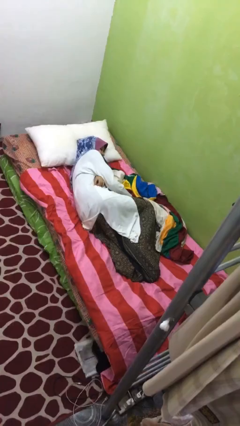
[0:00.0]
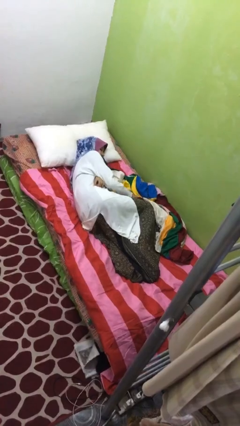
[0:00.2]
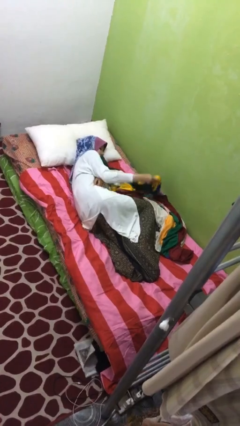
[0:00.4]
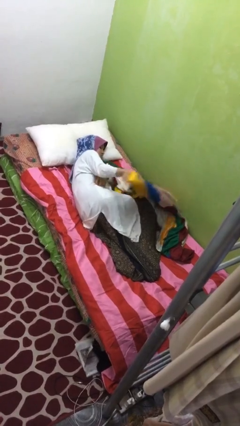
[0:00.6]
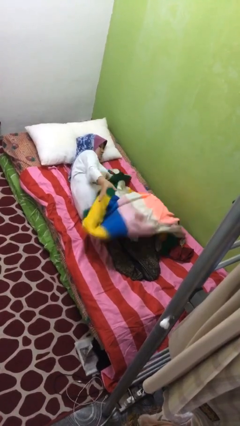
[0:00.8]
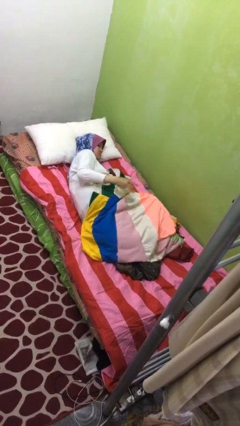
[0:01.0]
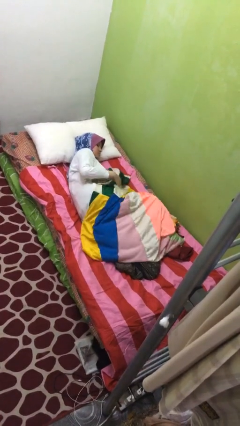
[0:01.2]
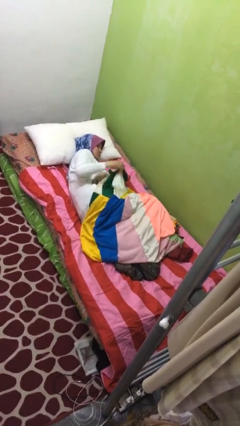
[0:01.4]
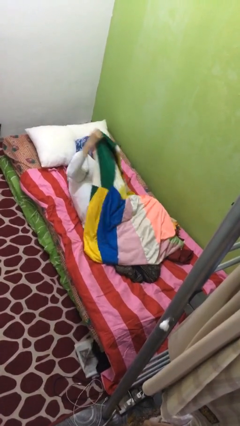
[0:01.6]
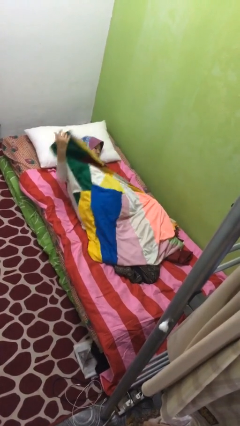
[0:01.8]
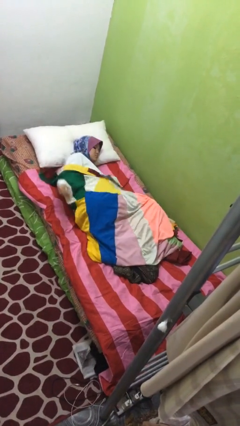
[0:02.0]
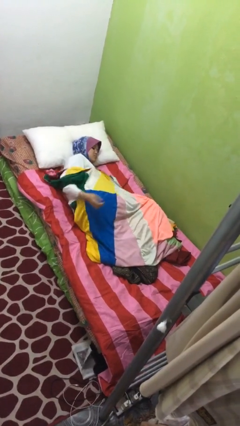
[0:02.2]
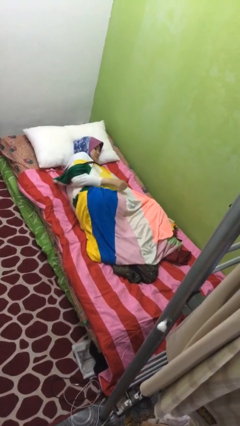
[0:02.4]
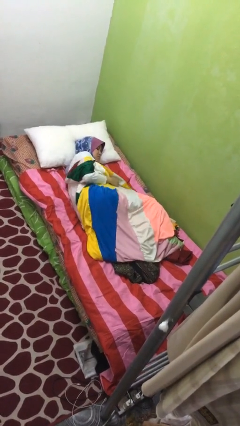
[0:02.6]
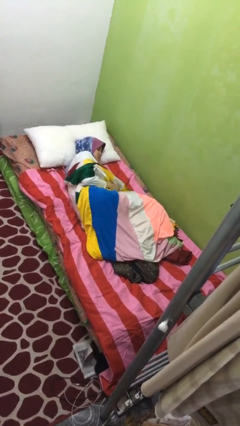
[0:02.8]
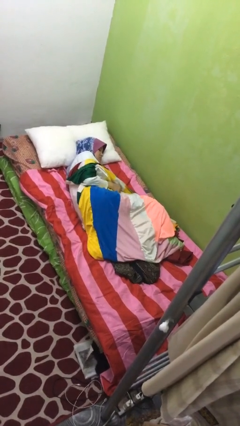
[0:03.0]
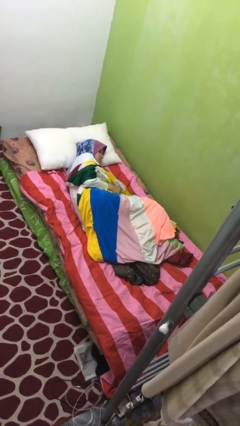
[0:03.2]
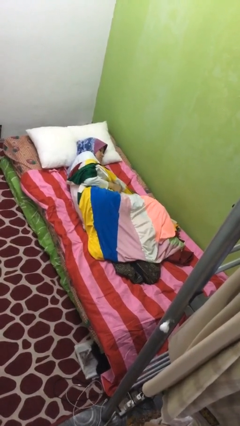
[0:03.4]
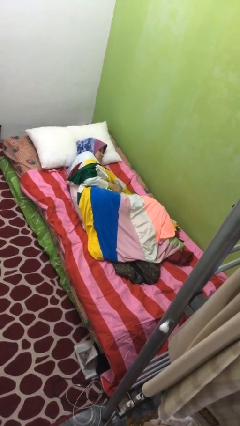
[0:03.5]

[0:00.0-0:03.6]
person covers with blanket

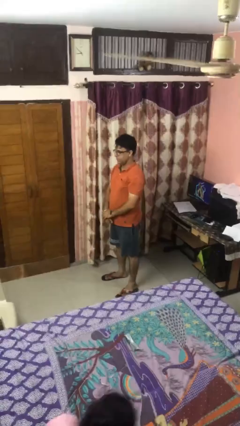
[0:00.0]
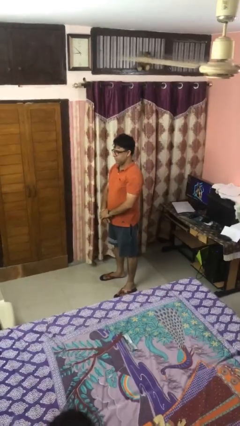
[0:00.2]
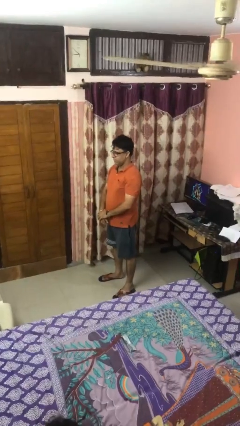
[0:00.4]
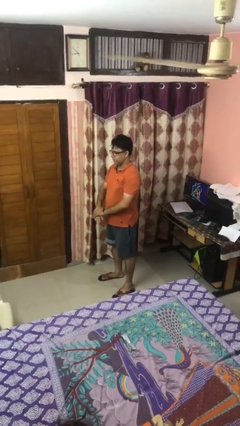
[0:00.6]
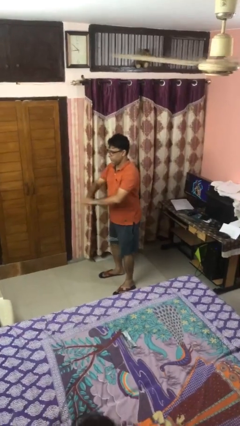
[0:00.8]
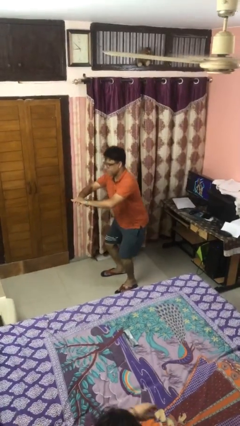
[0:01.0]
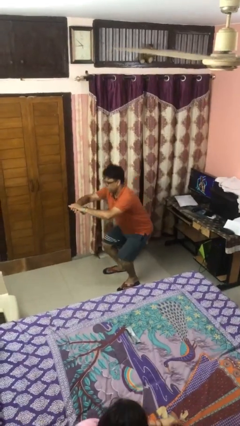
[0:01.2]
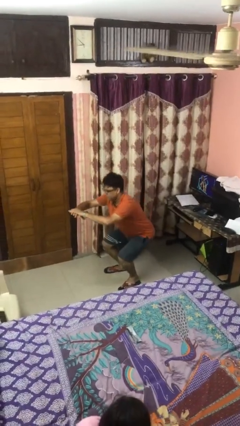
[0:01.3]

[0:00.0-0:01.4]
person squats

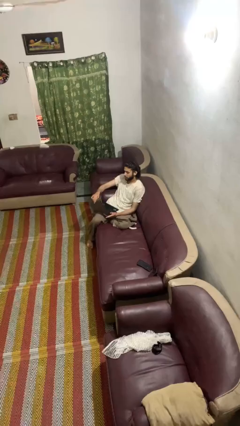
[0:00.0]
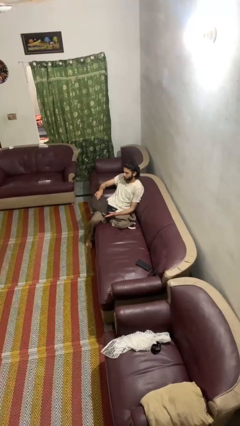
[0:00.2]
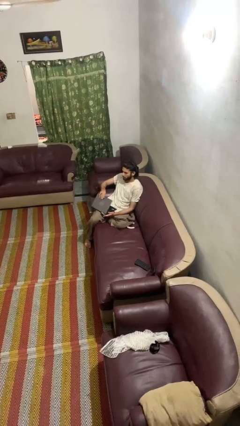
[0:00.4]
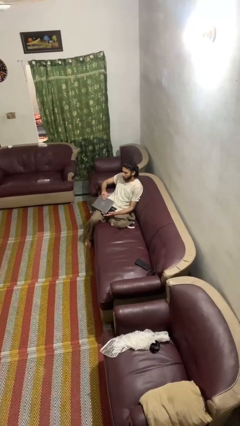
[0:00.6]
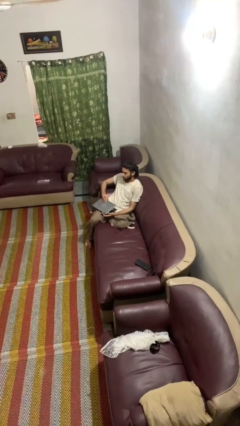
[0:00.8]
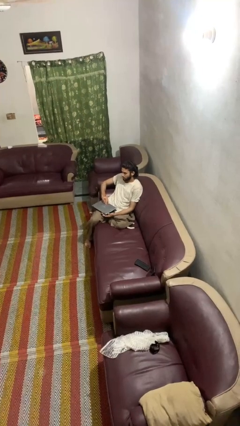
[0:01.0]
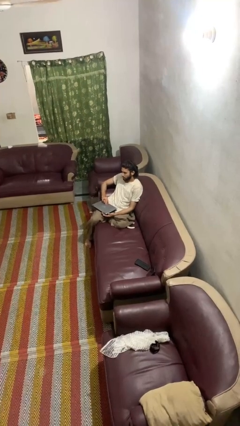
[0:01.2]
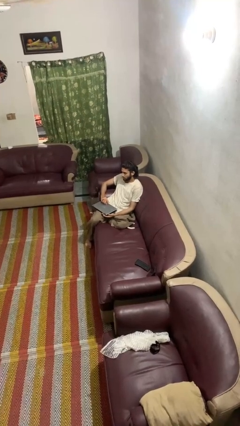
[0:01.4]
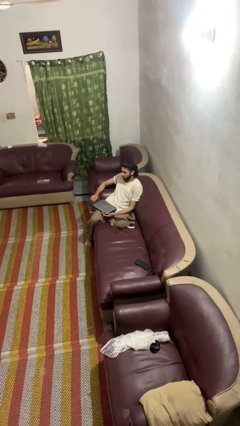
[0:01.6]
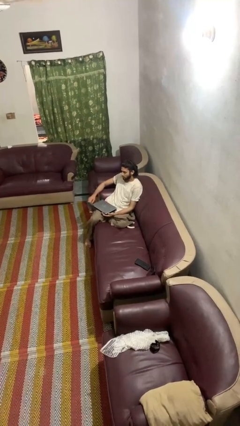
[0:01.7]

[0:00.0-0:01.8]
person closes laptop

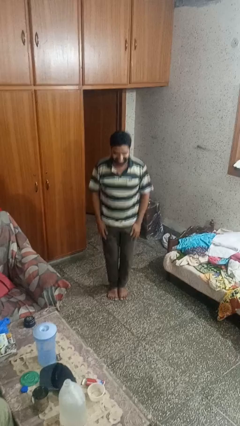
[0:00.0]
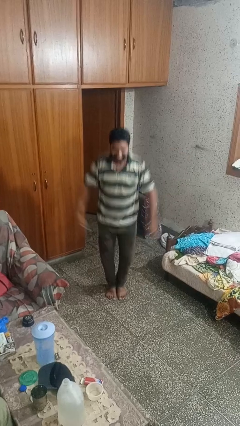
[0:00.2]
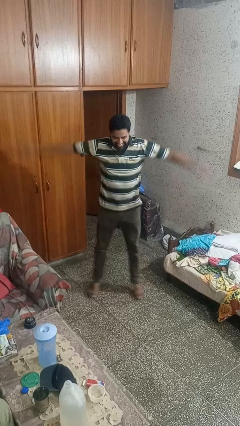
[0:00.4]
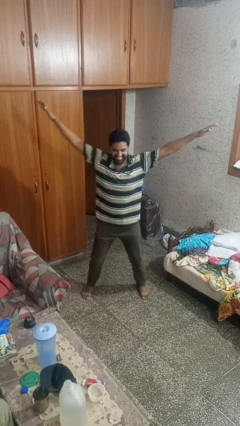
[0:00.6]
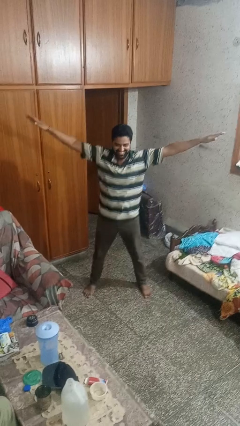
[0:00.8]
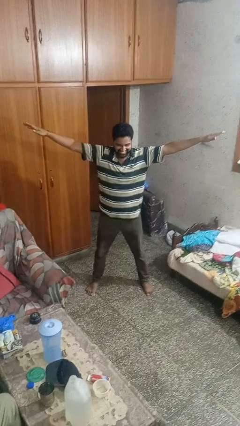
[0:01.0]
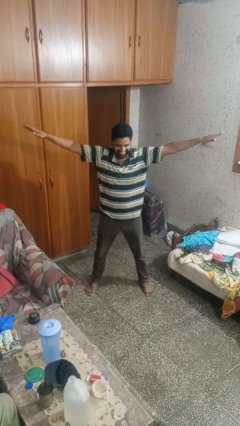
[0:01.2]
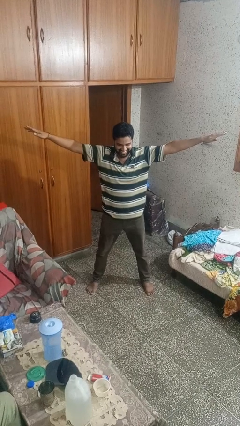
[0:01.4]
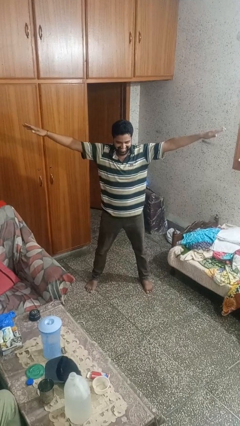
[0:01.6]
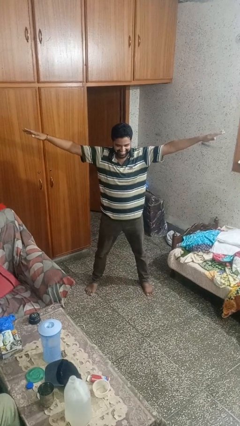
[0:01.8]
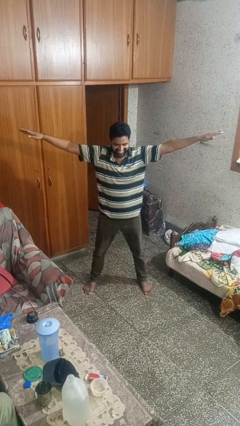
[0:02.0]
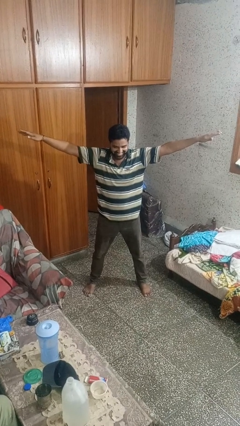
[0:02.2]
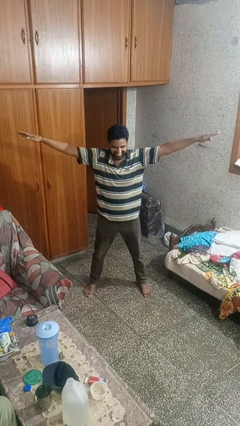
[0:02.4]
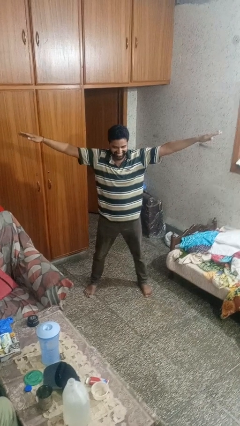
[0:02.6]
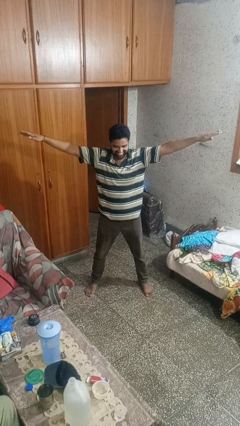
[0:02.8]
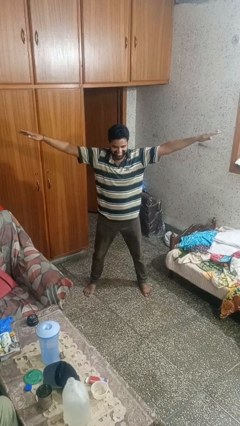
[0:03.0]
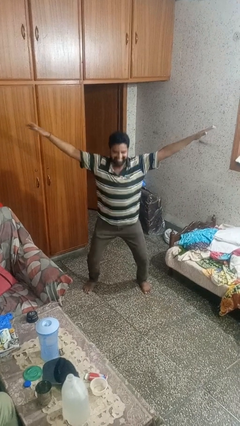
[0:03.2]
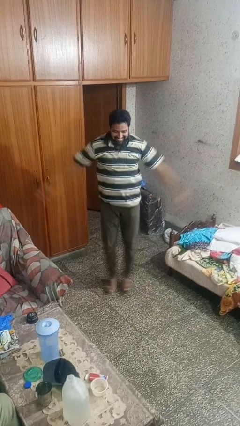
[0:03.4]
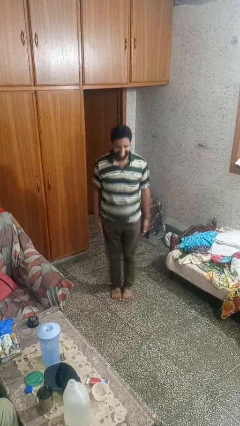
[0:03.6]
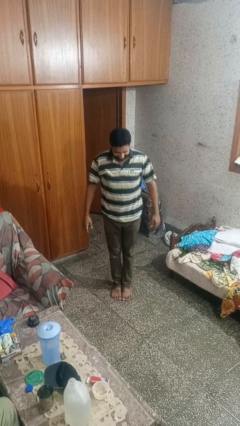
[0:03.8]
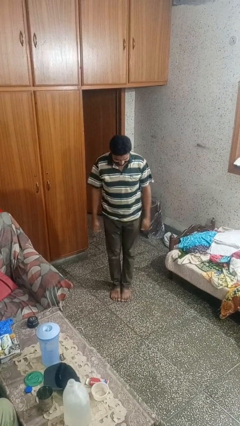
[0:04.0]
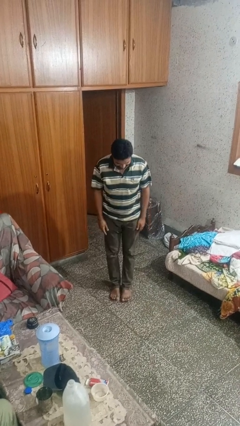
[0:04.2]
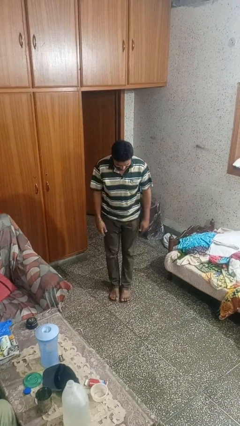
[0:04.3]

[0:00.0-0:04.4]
person exercises with jumping jacks

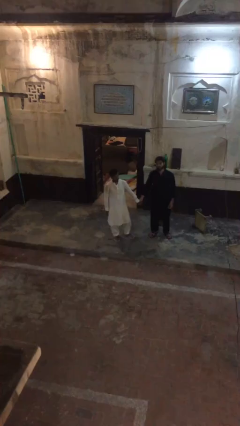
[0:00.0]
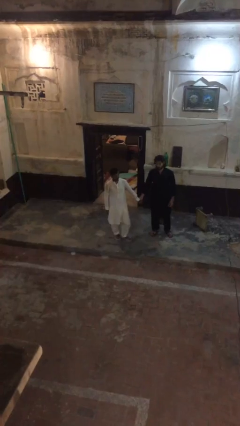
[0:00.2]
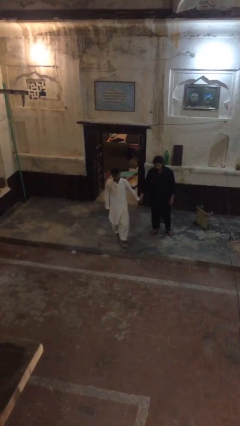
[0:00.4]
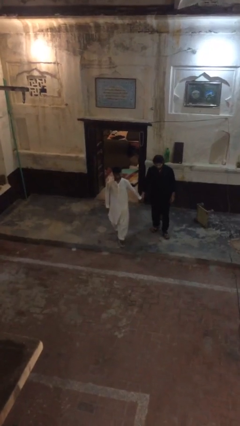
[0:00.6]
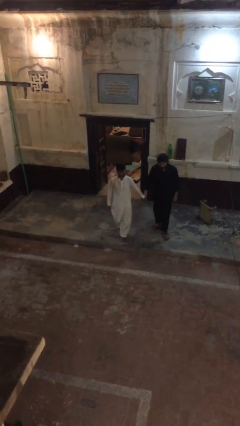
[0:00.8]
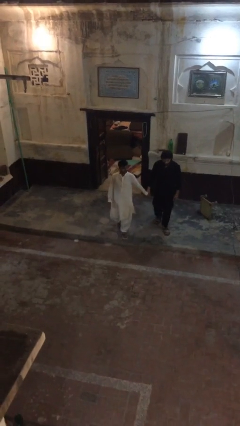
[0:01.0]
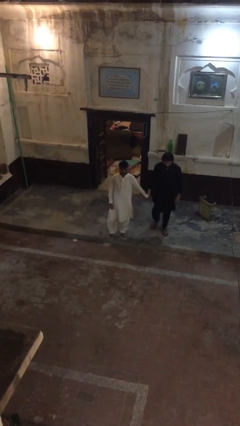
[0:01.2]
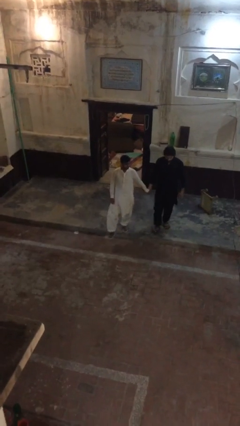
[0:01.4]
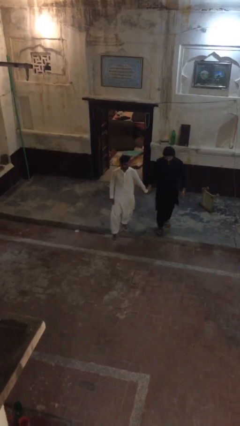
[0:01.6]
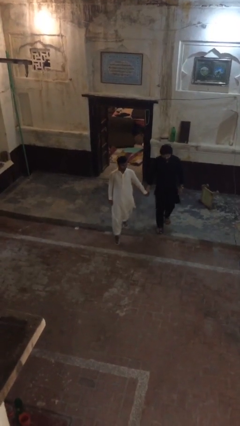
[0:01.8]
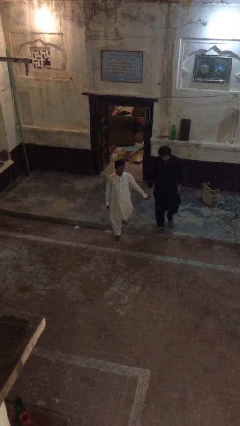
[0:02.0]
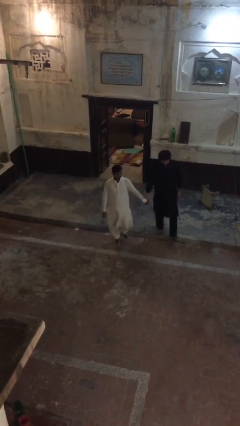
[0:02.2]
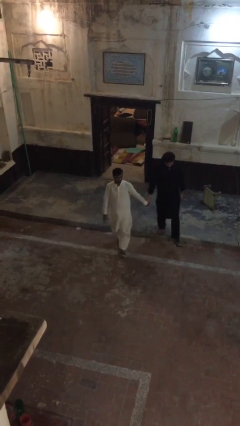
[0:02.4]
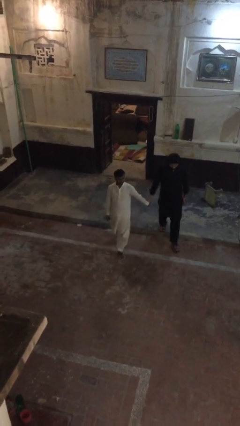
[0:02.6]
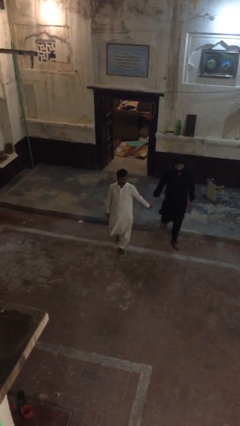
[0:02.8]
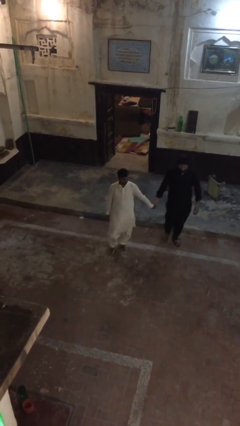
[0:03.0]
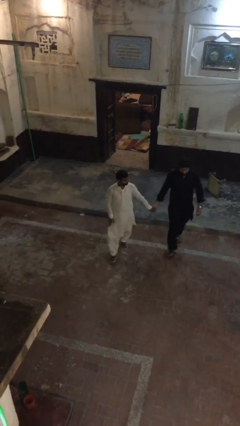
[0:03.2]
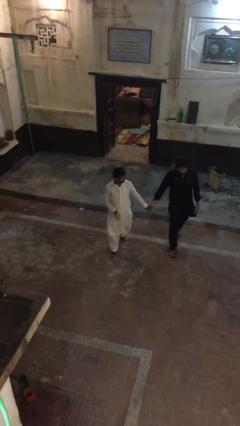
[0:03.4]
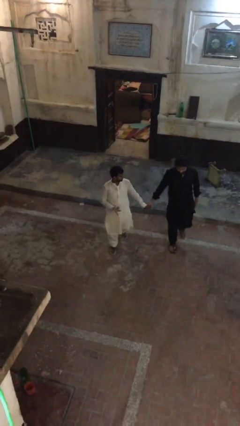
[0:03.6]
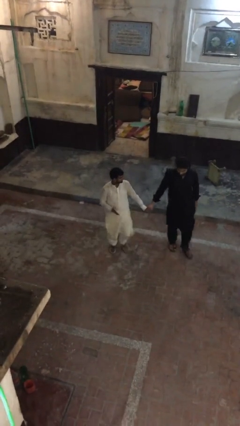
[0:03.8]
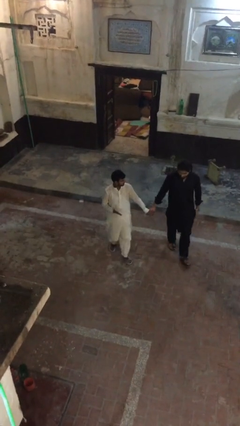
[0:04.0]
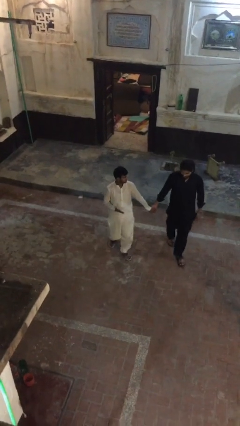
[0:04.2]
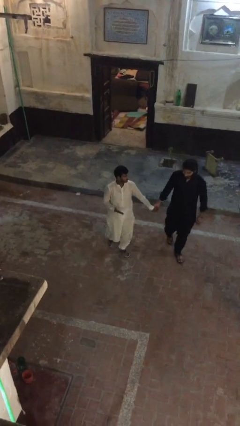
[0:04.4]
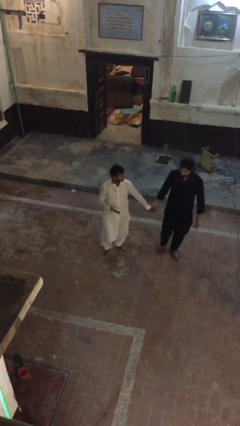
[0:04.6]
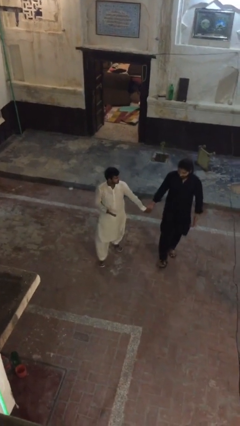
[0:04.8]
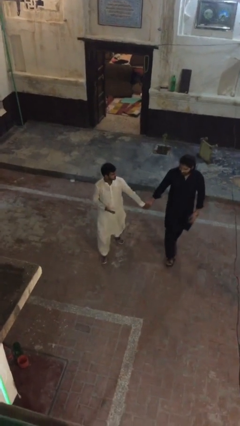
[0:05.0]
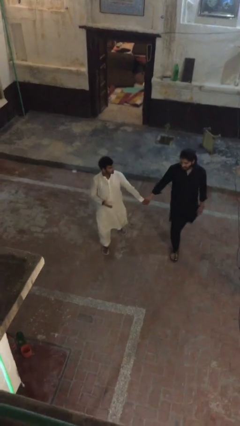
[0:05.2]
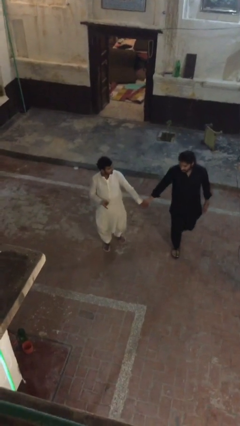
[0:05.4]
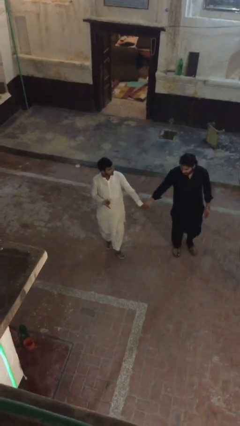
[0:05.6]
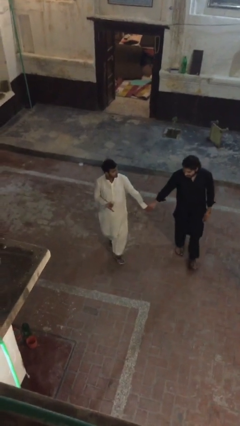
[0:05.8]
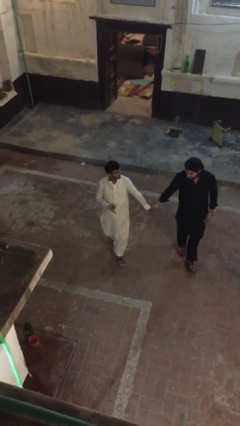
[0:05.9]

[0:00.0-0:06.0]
person holds hand

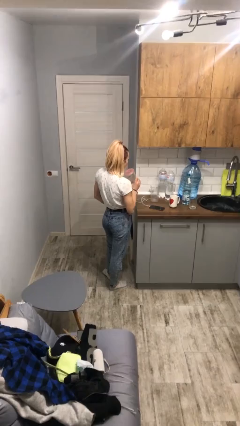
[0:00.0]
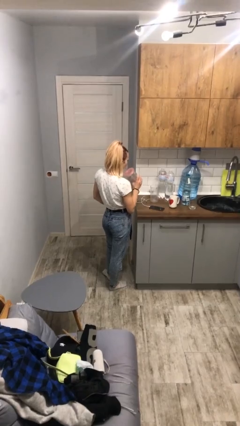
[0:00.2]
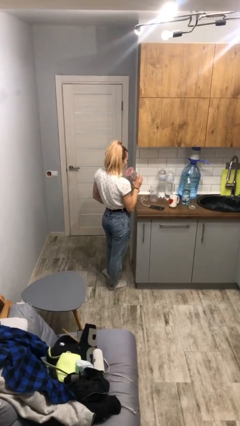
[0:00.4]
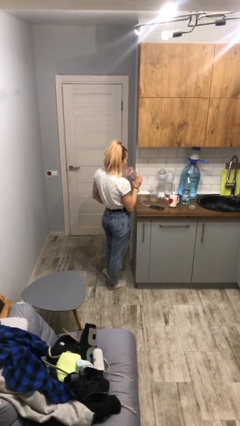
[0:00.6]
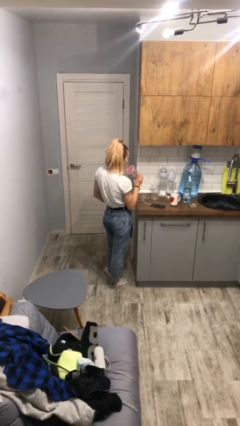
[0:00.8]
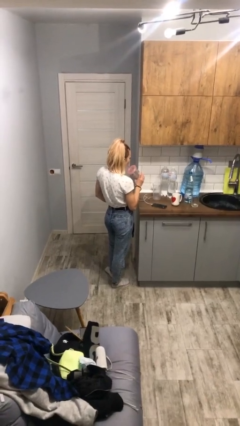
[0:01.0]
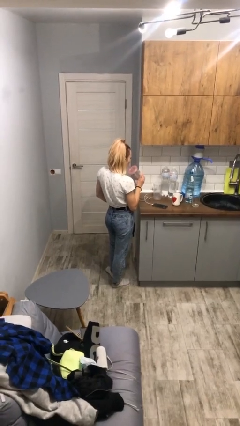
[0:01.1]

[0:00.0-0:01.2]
person drinks from straw
